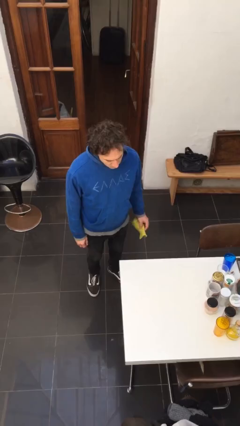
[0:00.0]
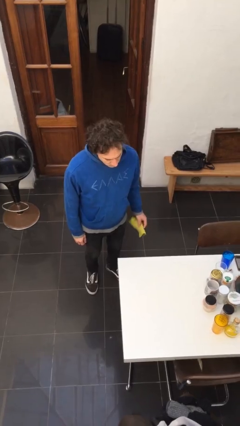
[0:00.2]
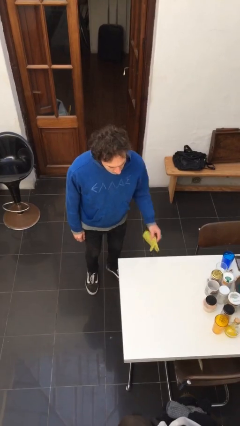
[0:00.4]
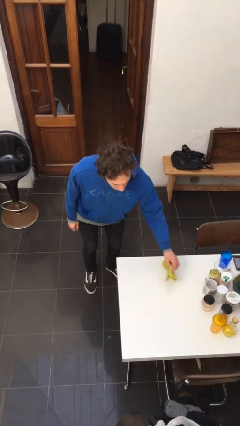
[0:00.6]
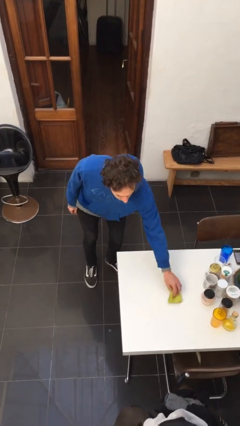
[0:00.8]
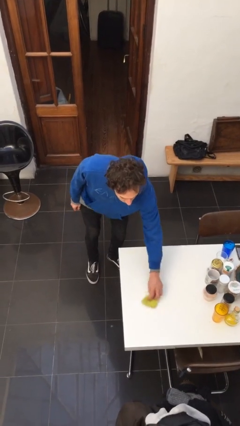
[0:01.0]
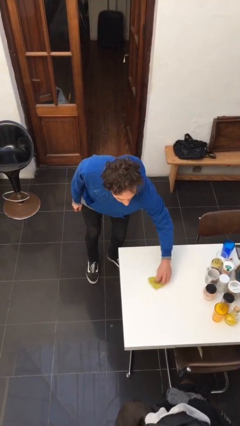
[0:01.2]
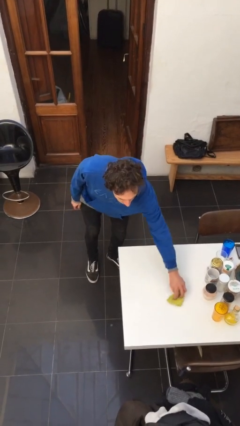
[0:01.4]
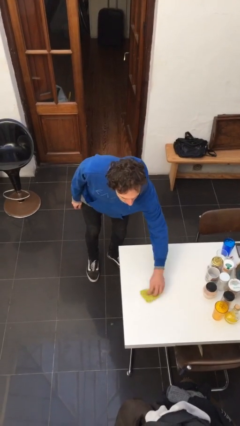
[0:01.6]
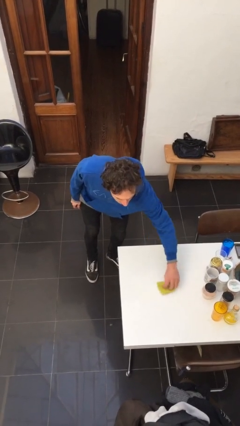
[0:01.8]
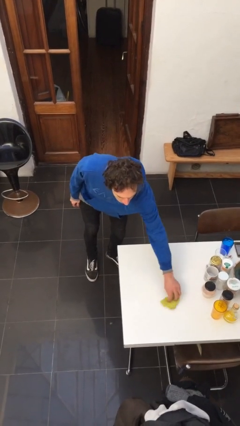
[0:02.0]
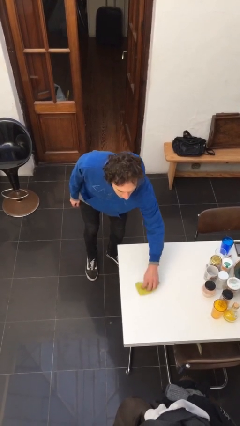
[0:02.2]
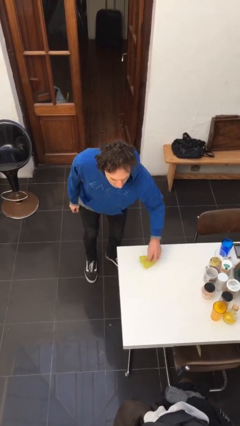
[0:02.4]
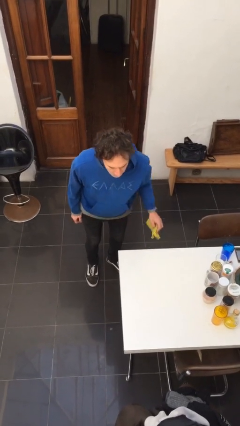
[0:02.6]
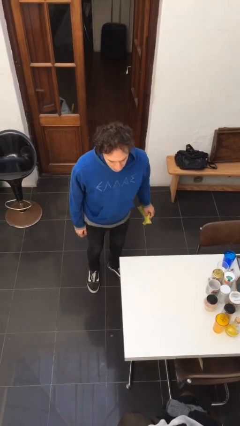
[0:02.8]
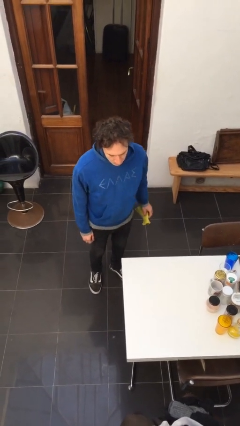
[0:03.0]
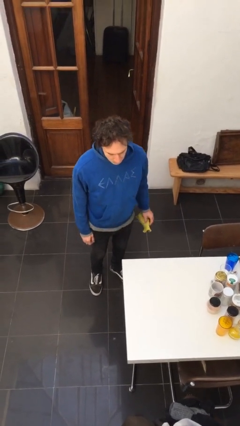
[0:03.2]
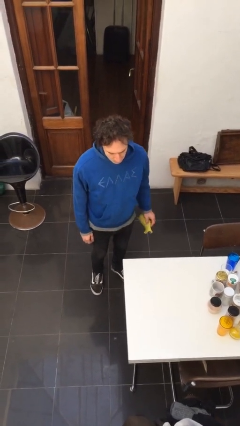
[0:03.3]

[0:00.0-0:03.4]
person cleans table with rag

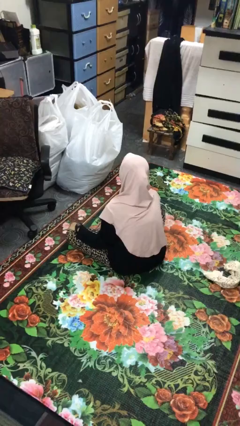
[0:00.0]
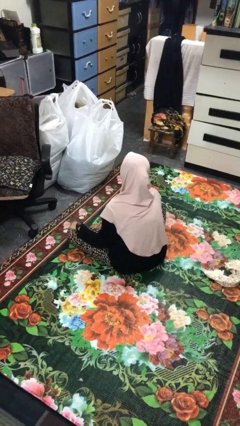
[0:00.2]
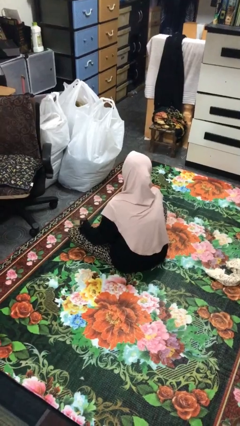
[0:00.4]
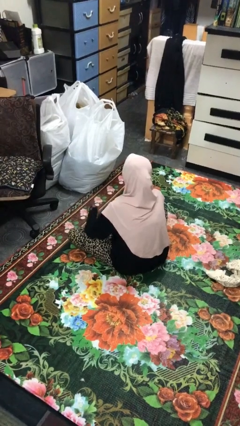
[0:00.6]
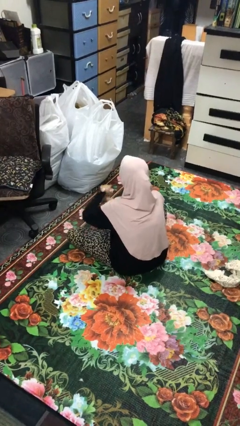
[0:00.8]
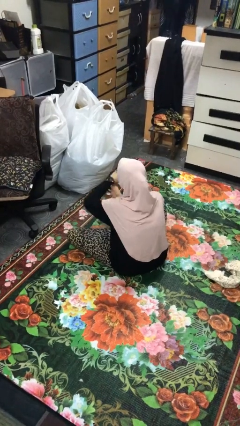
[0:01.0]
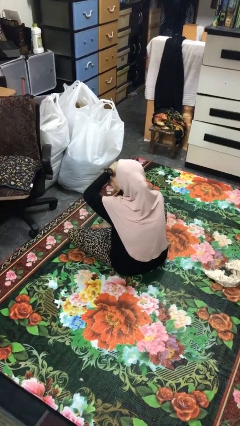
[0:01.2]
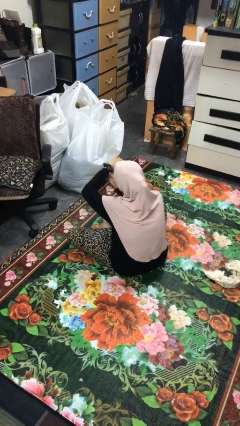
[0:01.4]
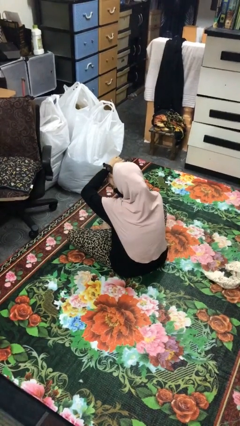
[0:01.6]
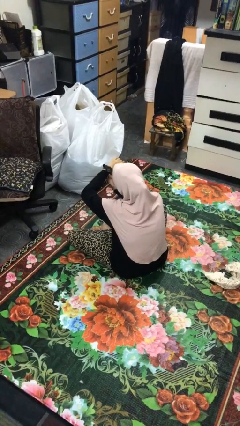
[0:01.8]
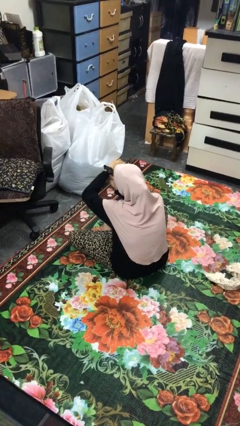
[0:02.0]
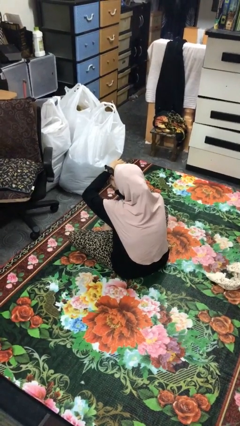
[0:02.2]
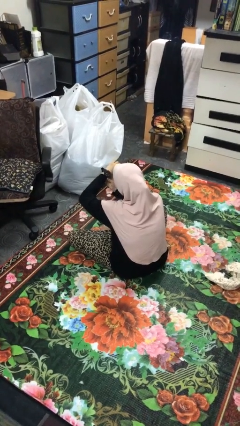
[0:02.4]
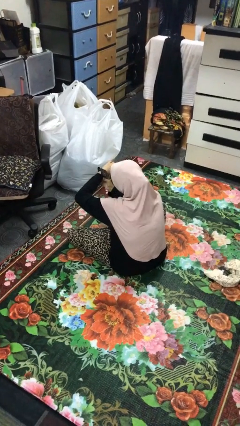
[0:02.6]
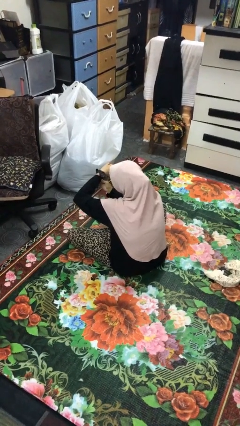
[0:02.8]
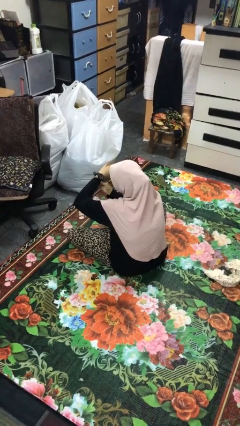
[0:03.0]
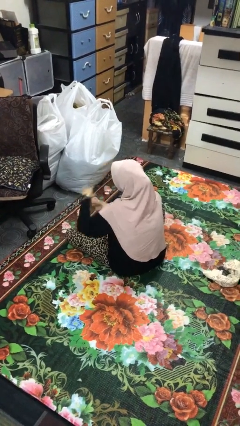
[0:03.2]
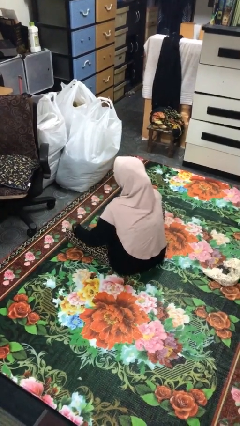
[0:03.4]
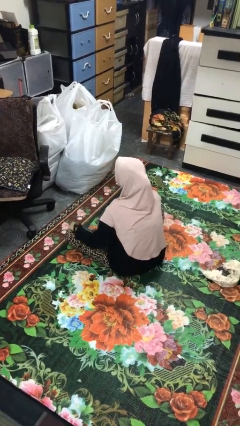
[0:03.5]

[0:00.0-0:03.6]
person looks at wristwatch

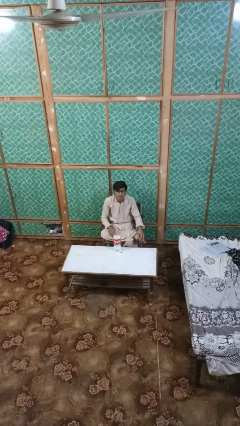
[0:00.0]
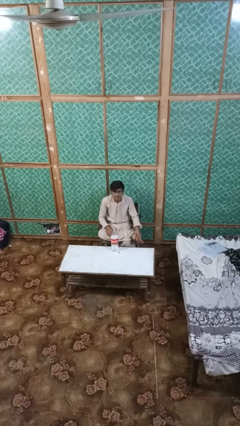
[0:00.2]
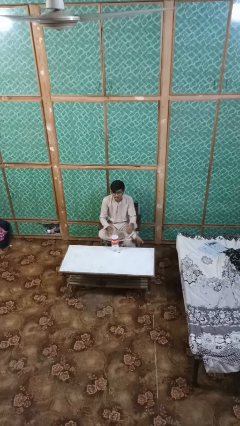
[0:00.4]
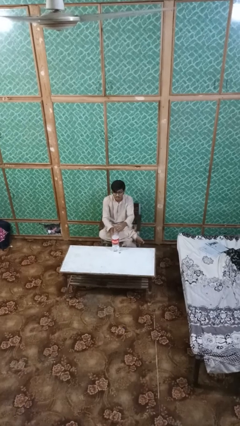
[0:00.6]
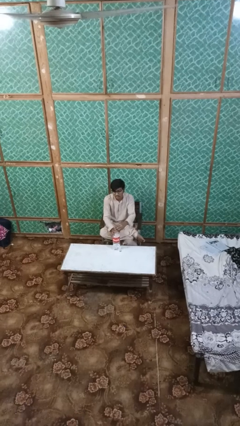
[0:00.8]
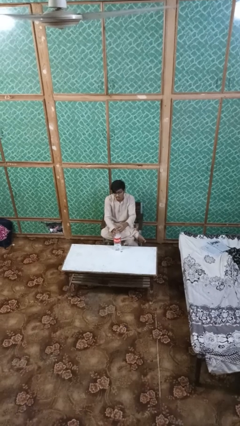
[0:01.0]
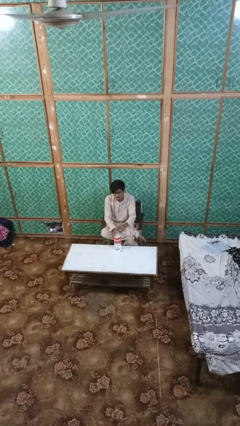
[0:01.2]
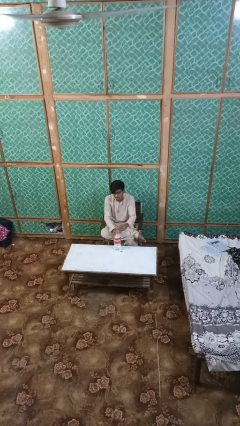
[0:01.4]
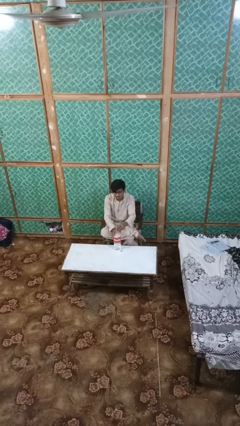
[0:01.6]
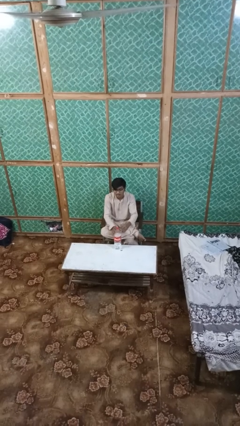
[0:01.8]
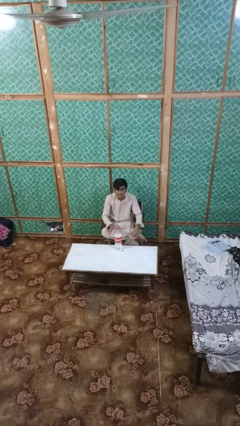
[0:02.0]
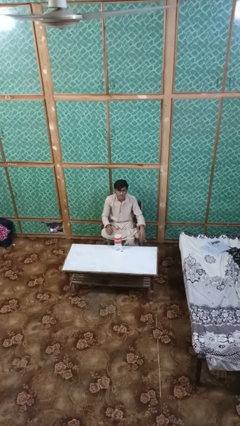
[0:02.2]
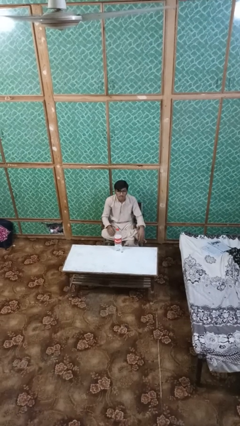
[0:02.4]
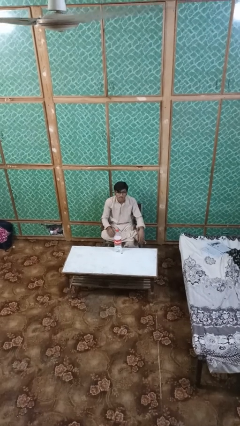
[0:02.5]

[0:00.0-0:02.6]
person screws lid to bottle

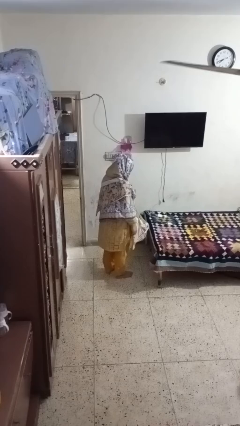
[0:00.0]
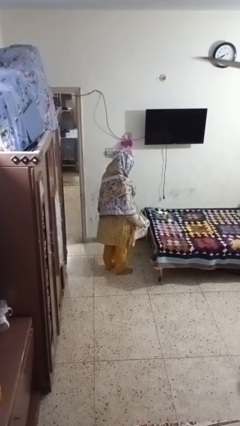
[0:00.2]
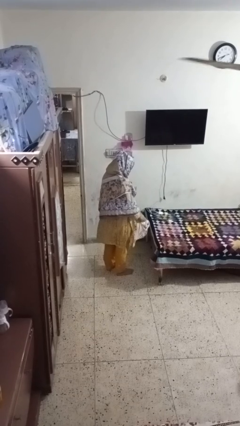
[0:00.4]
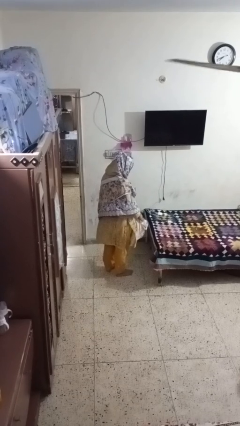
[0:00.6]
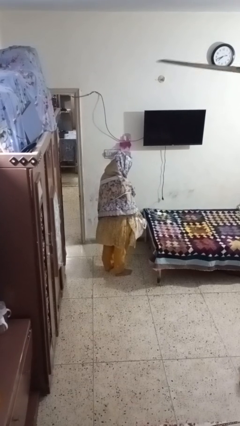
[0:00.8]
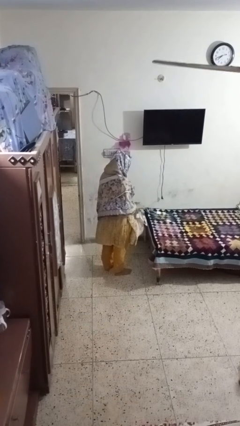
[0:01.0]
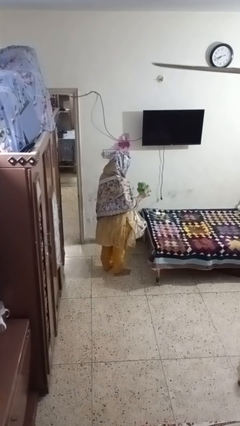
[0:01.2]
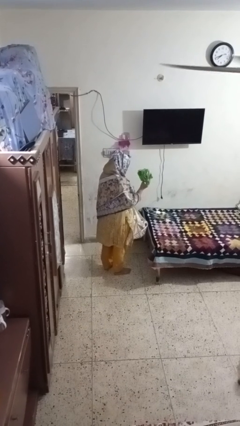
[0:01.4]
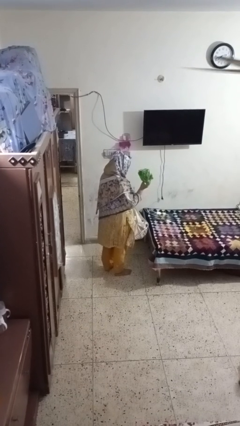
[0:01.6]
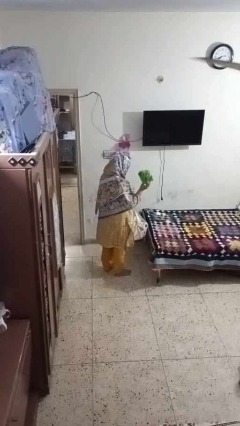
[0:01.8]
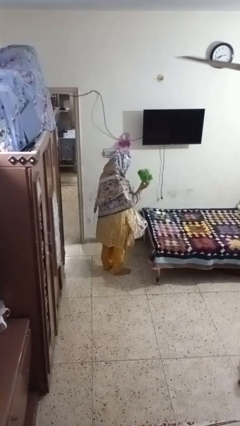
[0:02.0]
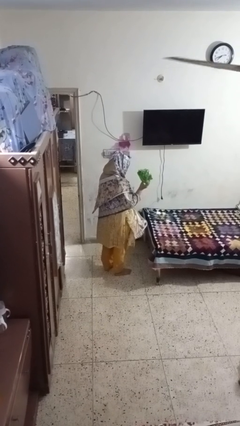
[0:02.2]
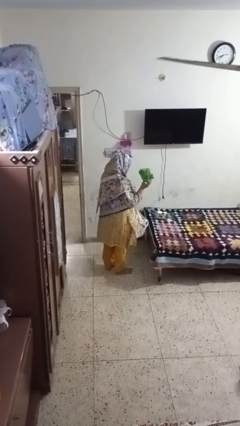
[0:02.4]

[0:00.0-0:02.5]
person takes object from bag

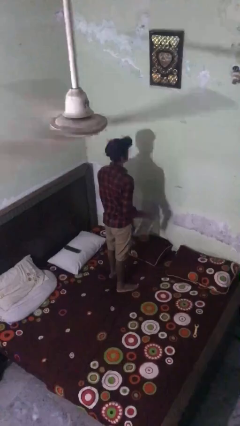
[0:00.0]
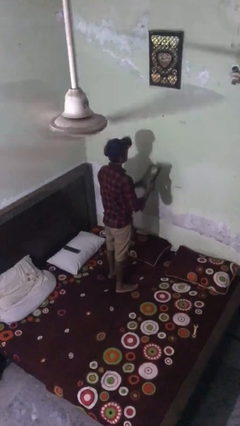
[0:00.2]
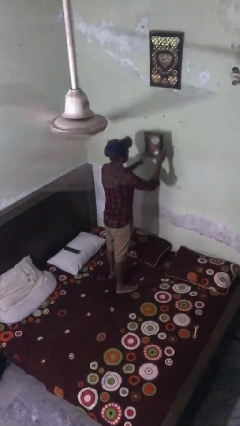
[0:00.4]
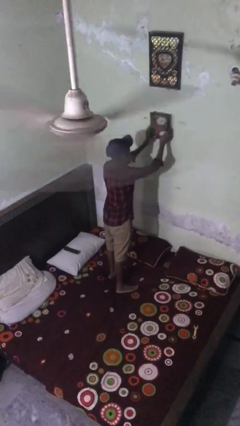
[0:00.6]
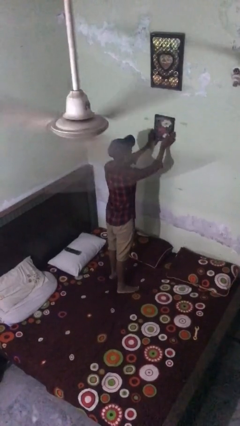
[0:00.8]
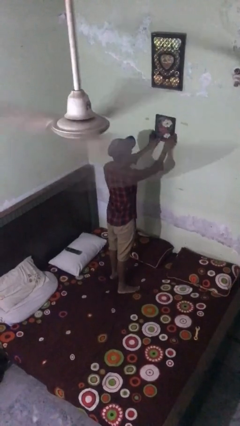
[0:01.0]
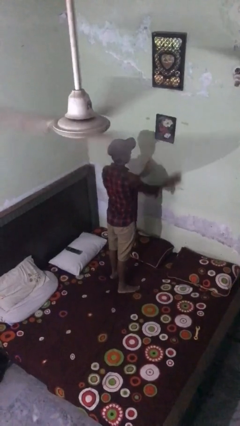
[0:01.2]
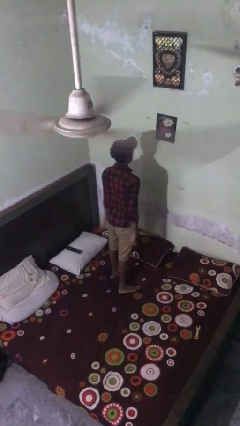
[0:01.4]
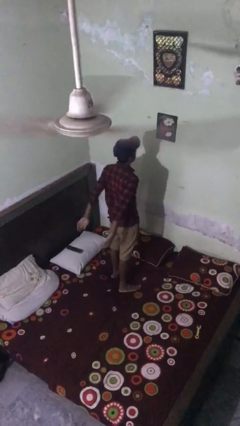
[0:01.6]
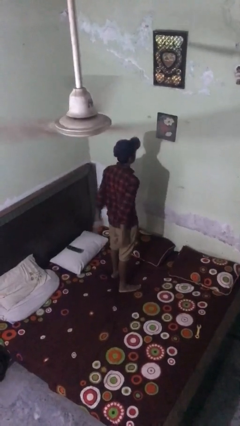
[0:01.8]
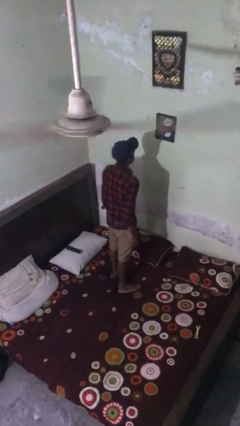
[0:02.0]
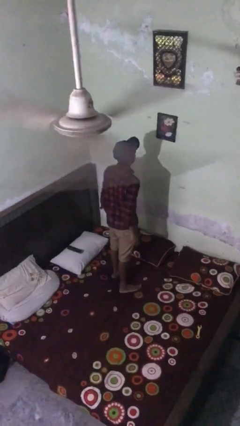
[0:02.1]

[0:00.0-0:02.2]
person puts up picture frame

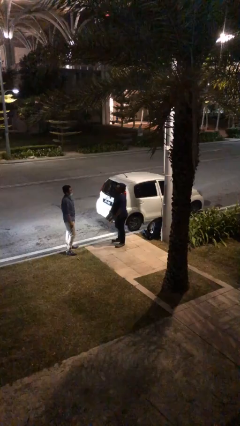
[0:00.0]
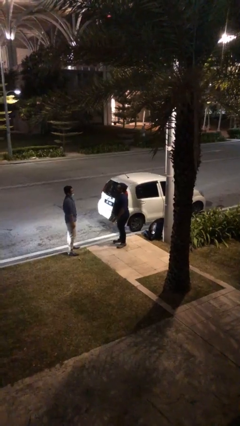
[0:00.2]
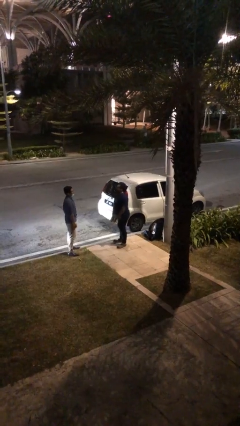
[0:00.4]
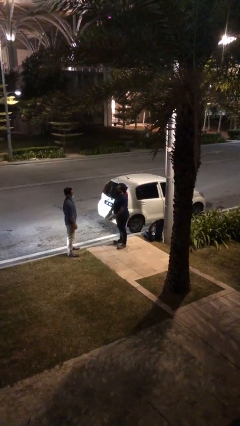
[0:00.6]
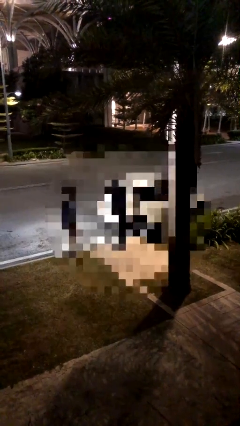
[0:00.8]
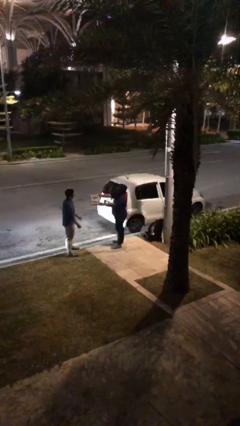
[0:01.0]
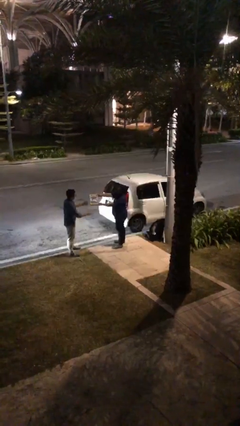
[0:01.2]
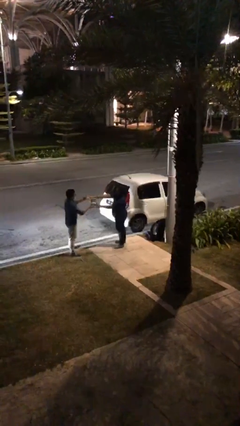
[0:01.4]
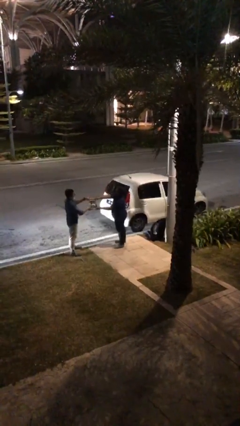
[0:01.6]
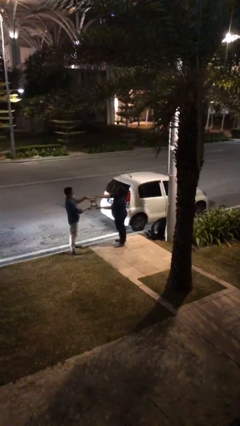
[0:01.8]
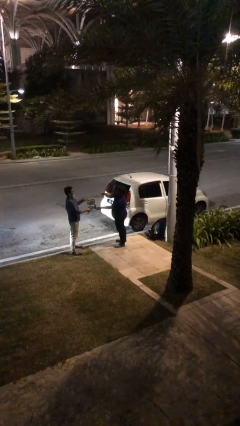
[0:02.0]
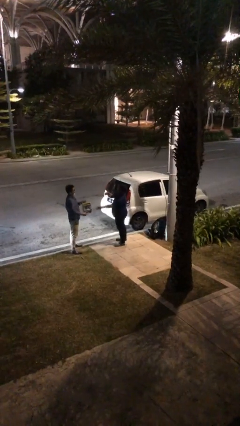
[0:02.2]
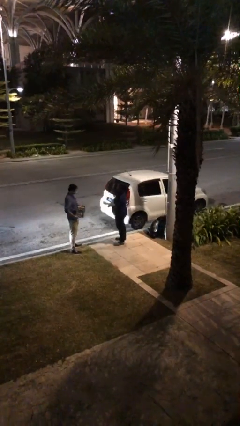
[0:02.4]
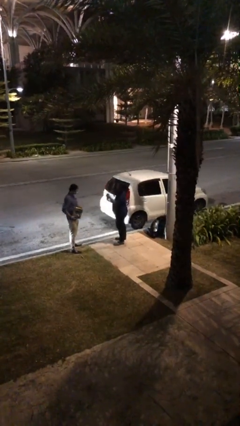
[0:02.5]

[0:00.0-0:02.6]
person transfers object to person

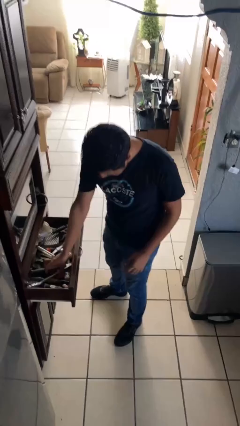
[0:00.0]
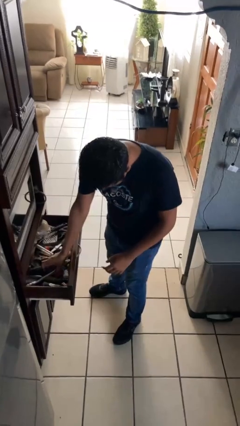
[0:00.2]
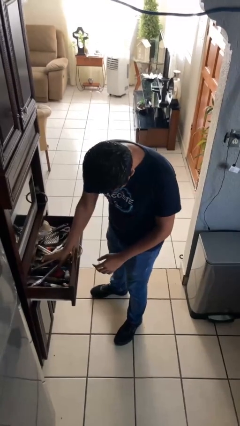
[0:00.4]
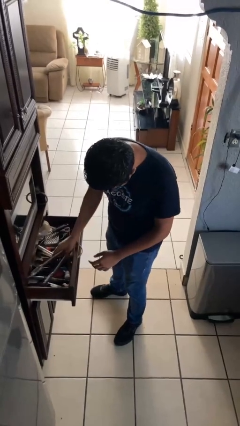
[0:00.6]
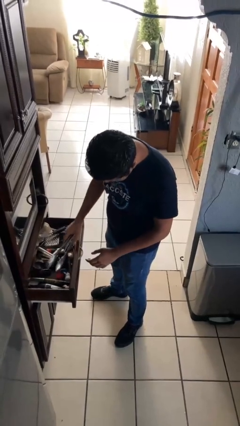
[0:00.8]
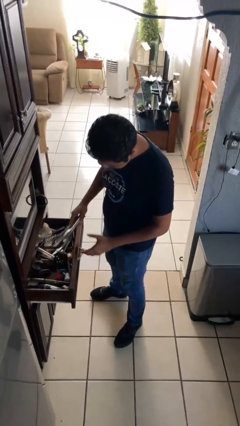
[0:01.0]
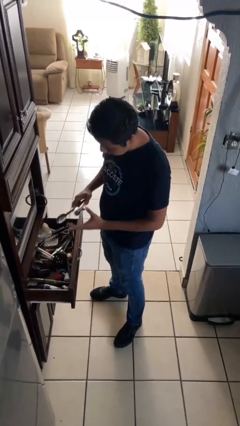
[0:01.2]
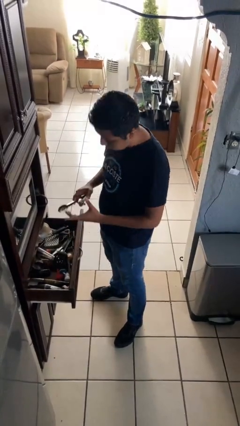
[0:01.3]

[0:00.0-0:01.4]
person takes object from kitchen drawer
